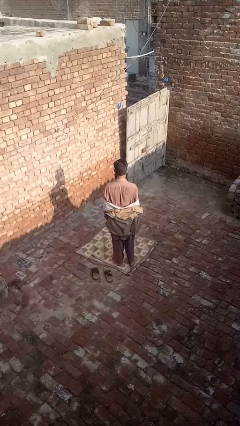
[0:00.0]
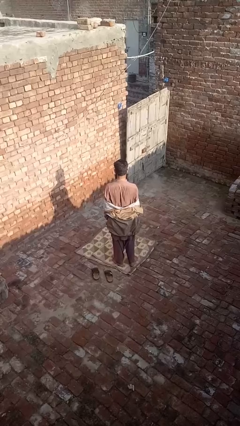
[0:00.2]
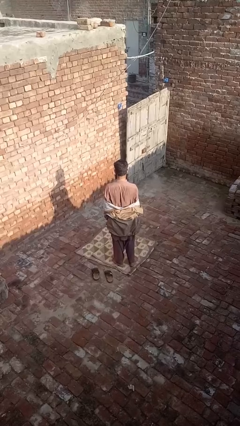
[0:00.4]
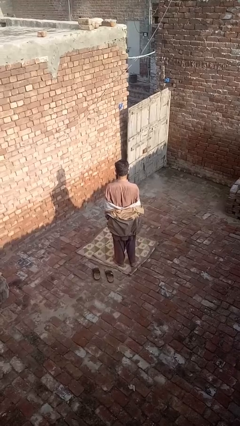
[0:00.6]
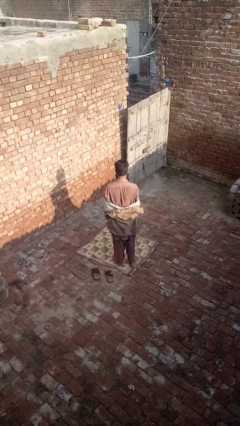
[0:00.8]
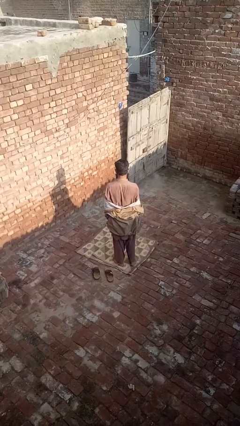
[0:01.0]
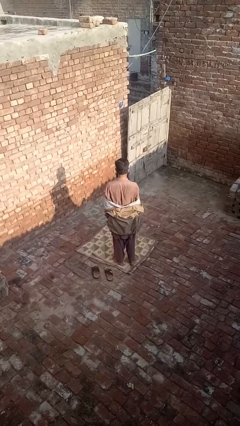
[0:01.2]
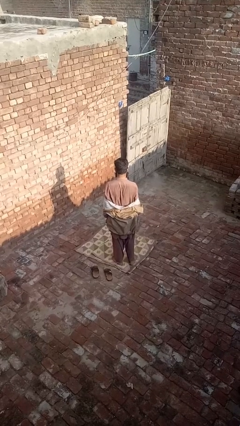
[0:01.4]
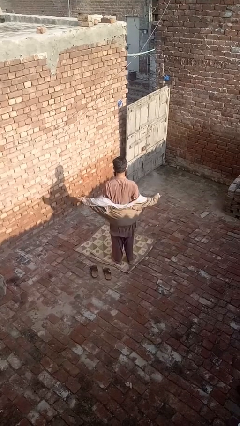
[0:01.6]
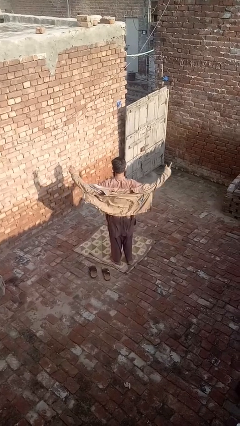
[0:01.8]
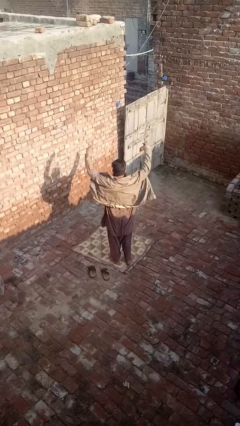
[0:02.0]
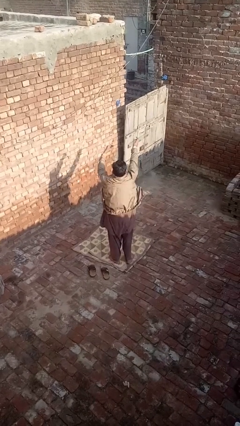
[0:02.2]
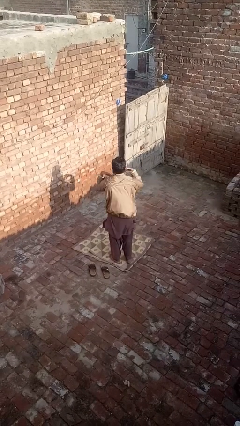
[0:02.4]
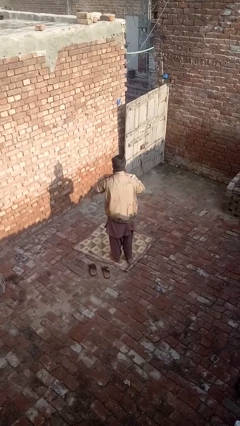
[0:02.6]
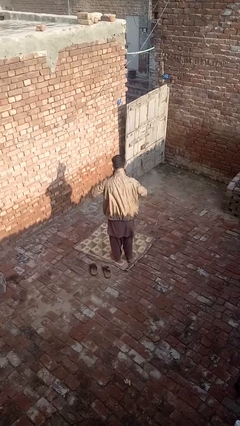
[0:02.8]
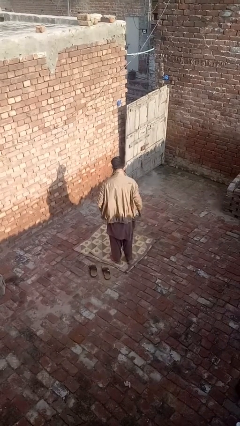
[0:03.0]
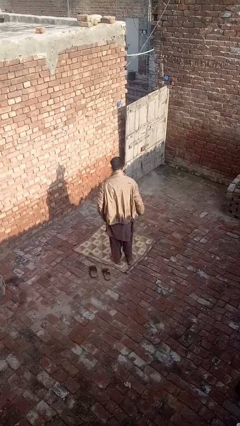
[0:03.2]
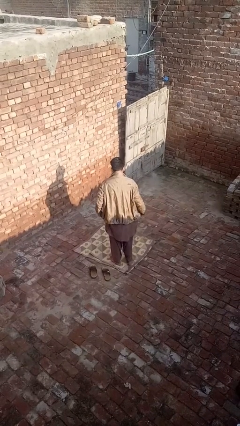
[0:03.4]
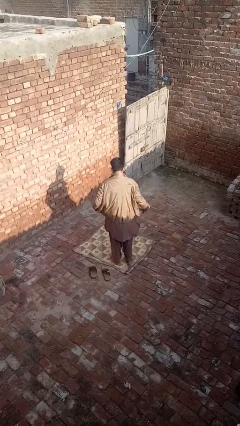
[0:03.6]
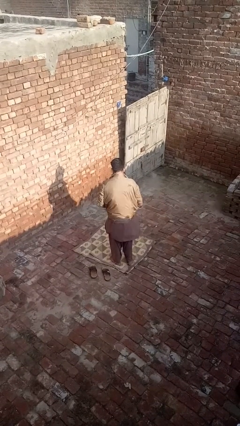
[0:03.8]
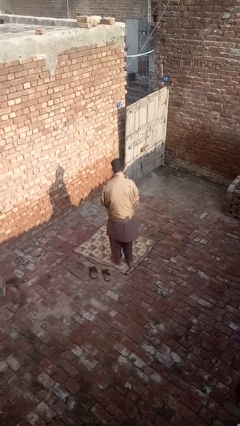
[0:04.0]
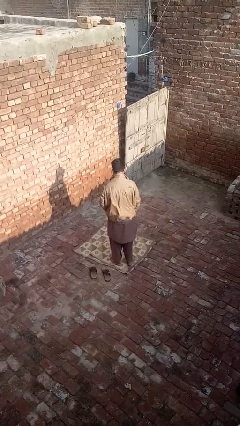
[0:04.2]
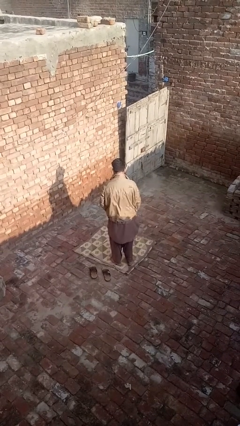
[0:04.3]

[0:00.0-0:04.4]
person puts on jacket

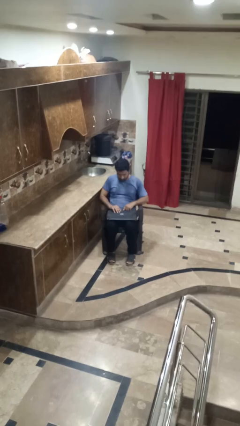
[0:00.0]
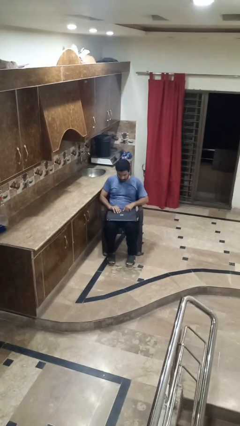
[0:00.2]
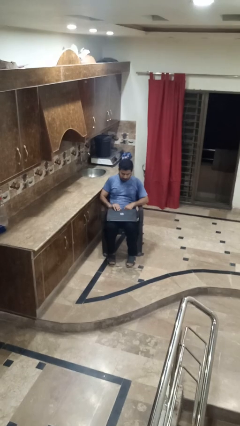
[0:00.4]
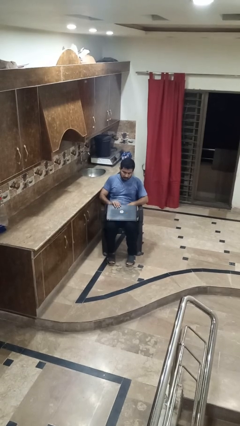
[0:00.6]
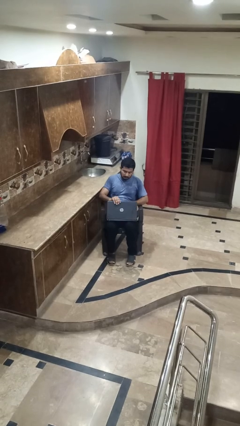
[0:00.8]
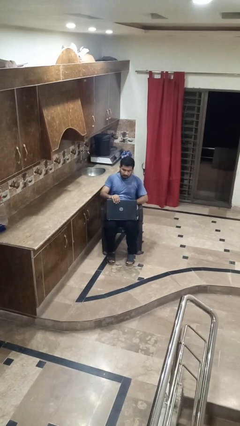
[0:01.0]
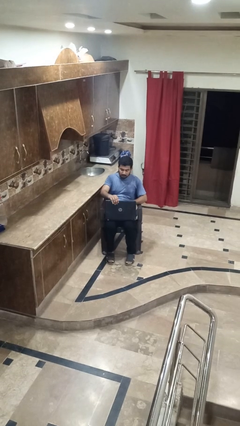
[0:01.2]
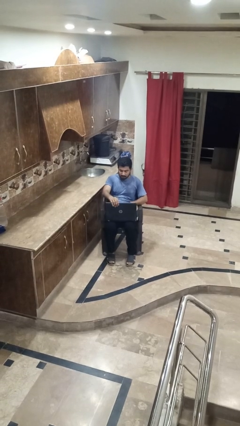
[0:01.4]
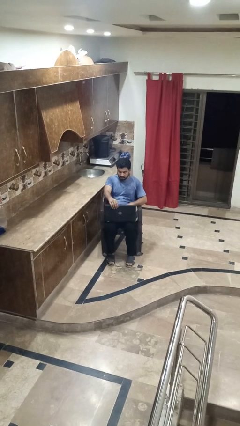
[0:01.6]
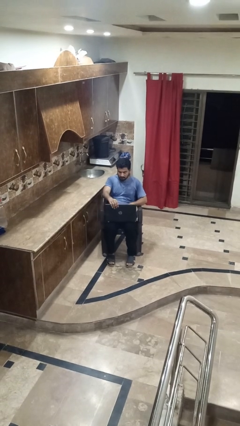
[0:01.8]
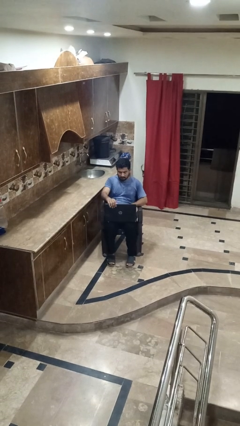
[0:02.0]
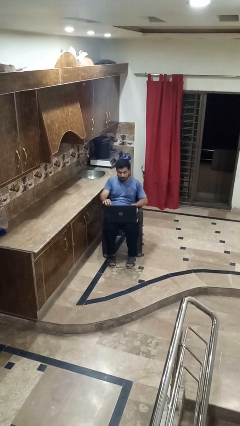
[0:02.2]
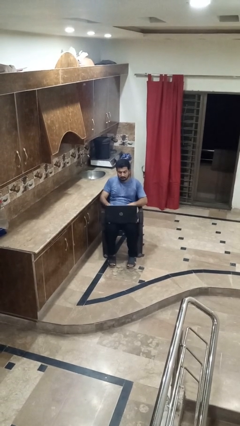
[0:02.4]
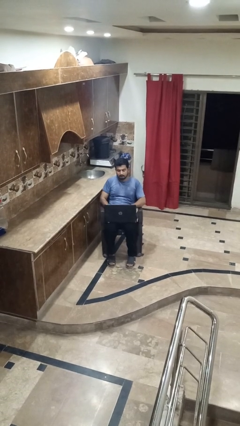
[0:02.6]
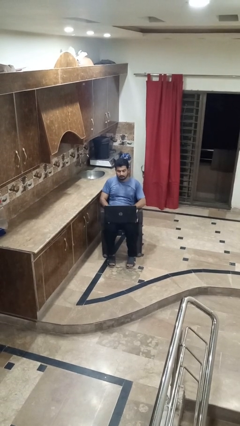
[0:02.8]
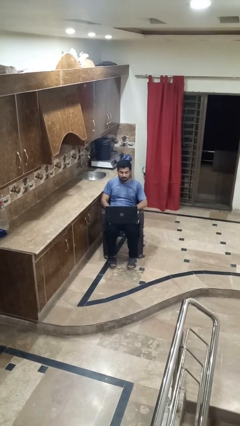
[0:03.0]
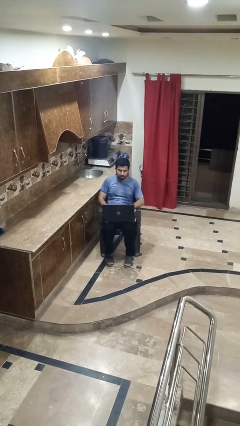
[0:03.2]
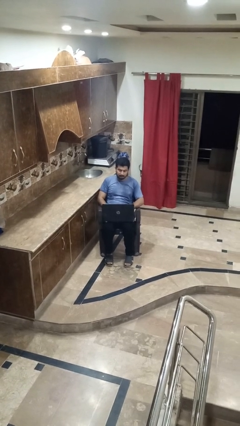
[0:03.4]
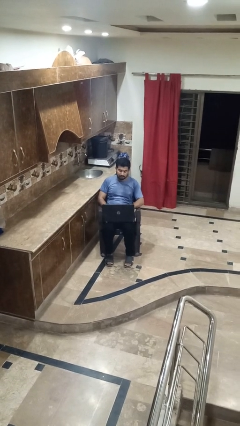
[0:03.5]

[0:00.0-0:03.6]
person opens laptop

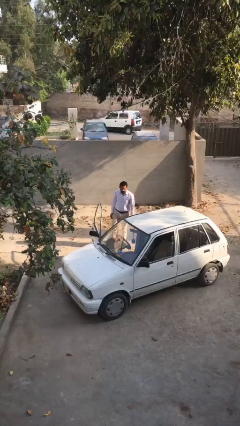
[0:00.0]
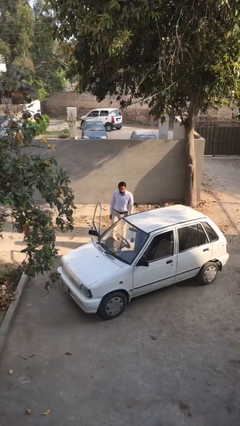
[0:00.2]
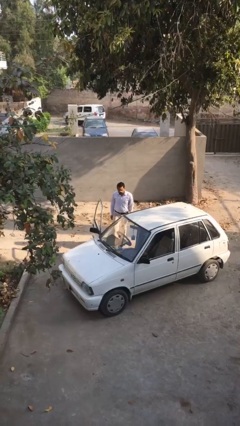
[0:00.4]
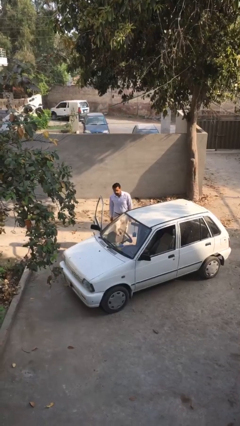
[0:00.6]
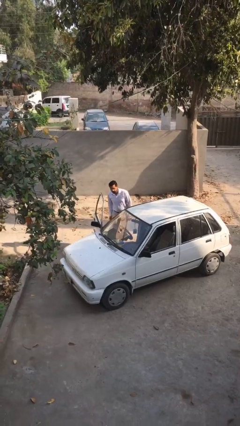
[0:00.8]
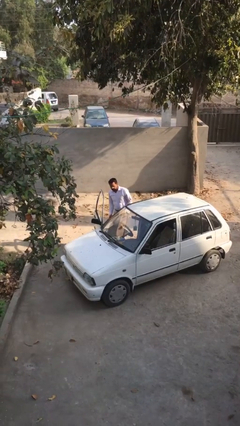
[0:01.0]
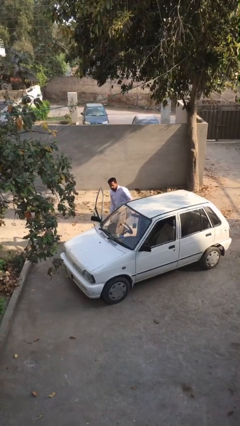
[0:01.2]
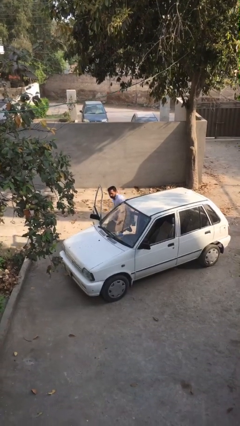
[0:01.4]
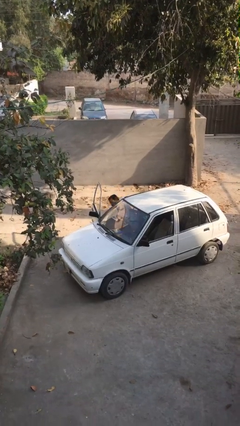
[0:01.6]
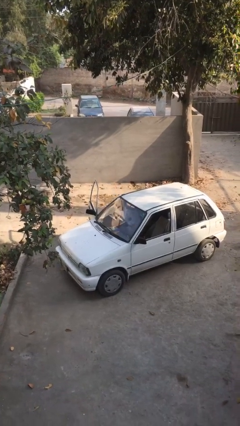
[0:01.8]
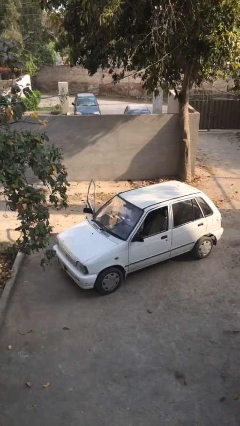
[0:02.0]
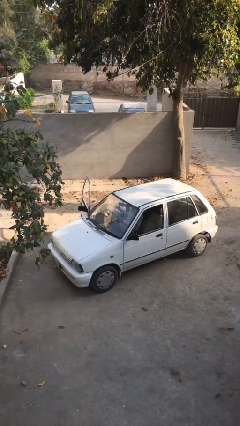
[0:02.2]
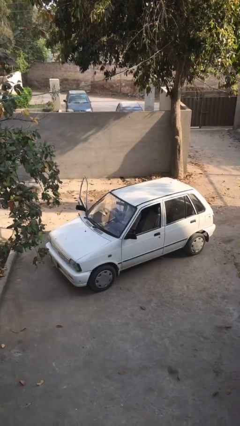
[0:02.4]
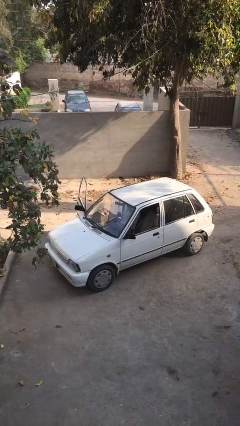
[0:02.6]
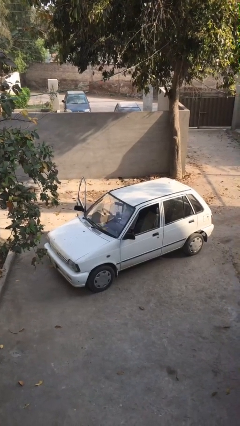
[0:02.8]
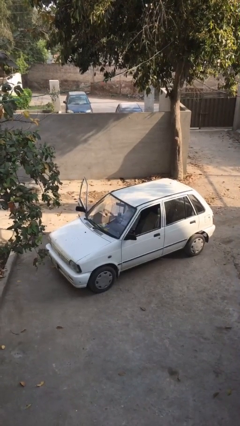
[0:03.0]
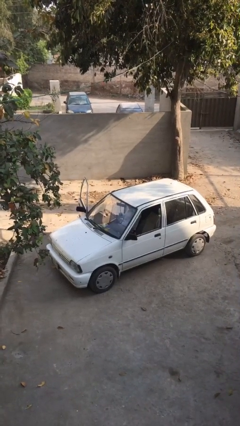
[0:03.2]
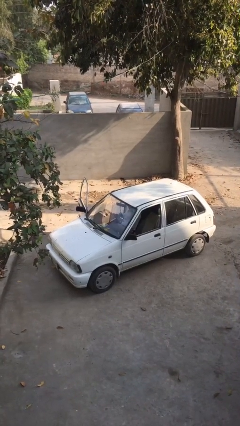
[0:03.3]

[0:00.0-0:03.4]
person enters car

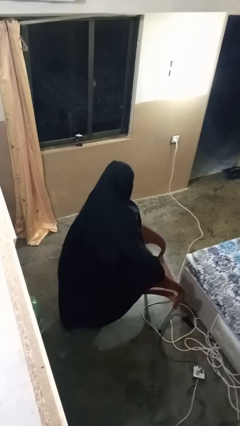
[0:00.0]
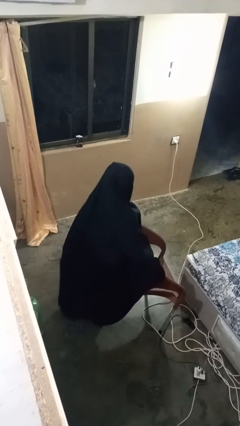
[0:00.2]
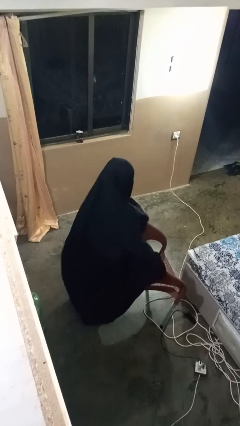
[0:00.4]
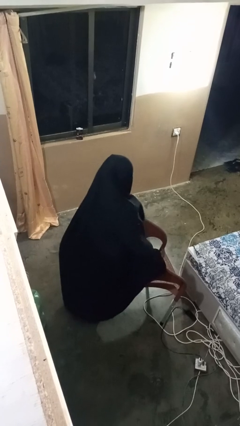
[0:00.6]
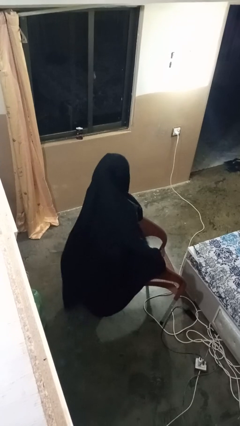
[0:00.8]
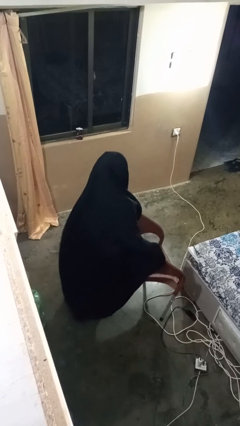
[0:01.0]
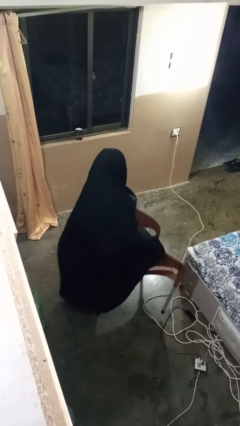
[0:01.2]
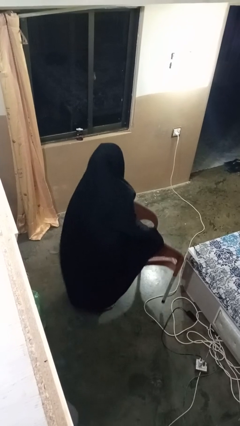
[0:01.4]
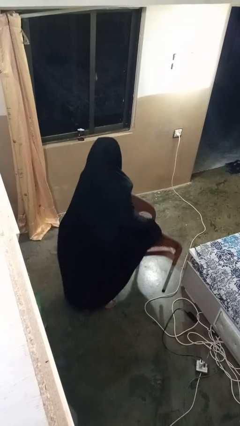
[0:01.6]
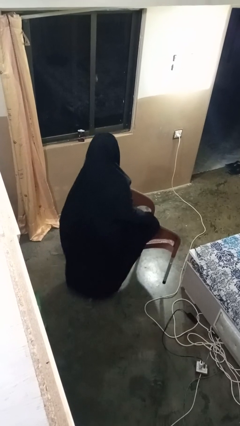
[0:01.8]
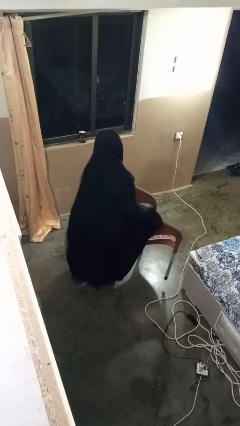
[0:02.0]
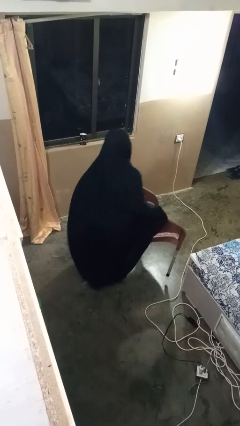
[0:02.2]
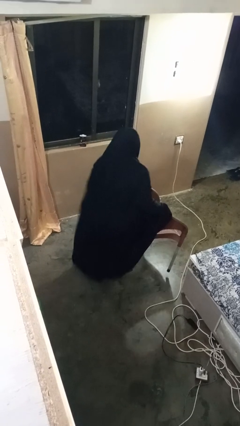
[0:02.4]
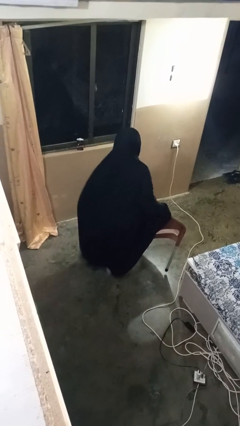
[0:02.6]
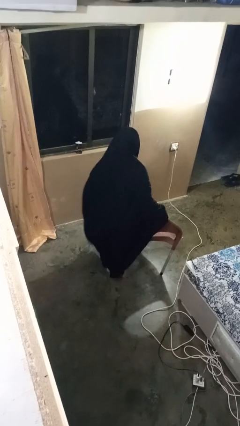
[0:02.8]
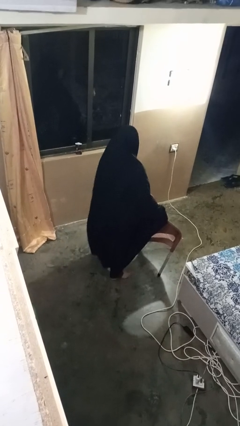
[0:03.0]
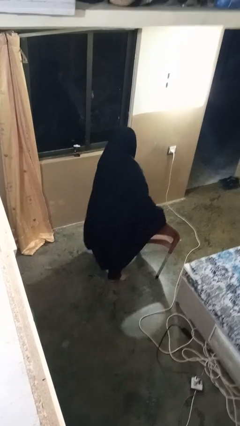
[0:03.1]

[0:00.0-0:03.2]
person carries furniture

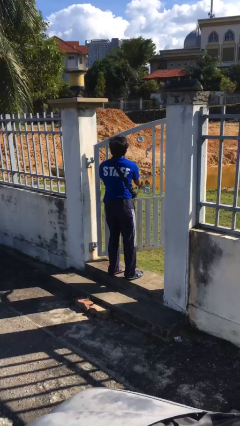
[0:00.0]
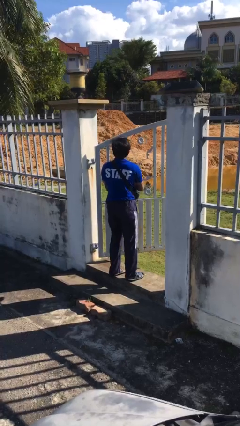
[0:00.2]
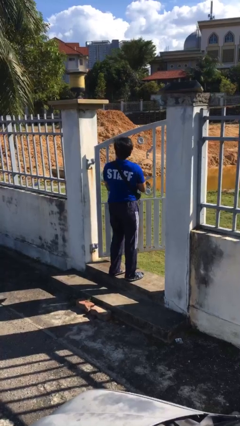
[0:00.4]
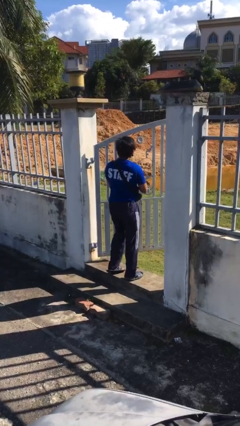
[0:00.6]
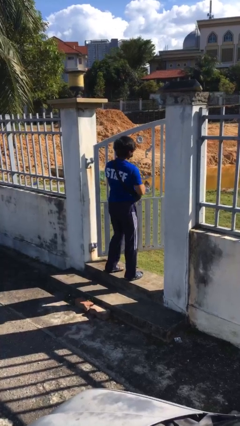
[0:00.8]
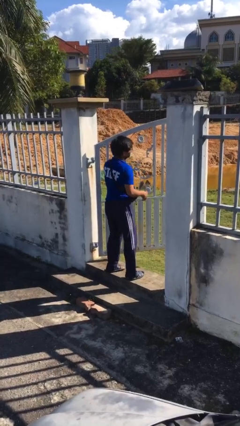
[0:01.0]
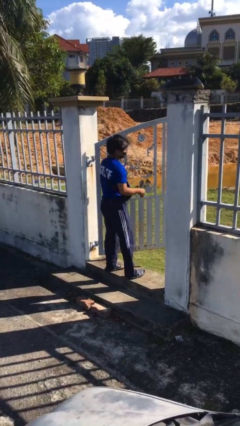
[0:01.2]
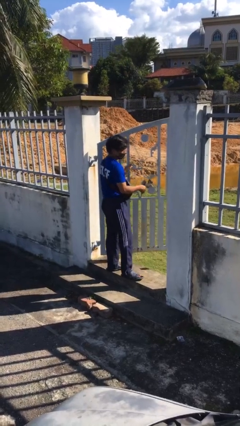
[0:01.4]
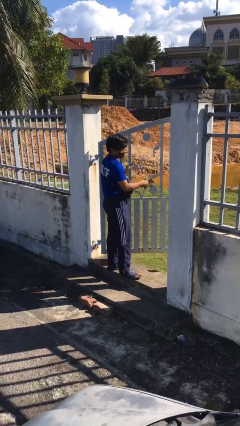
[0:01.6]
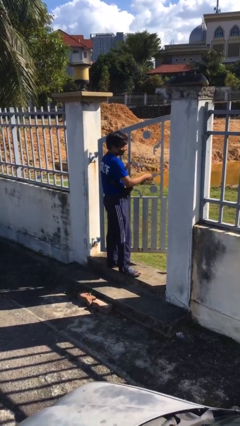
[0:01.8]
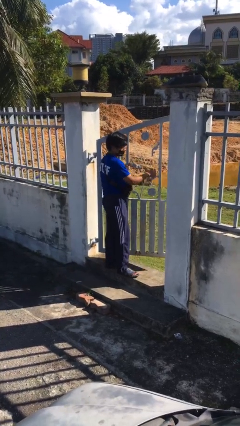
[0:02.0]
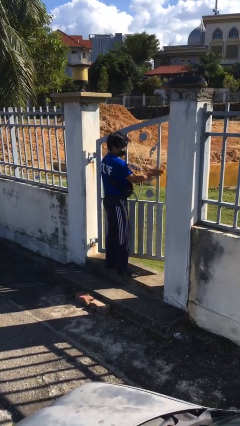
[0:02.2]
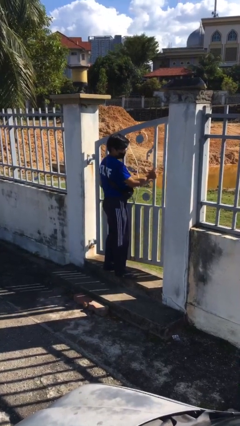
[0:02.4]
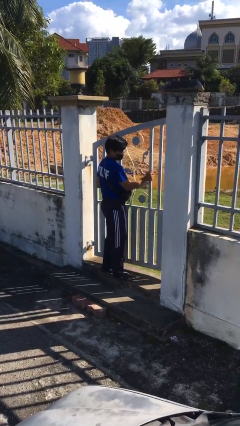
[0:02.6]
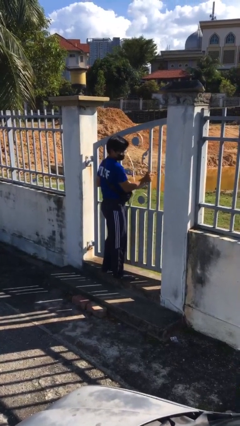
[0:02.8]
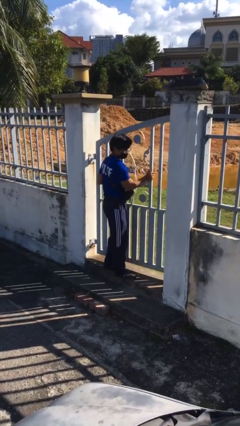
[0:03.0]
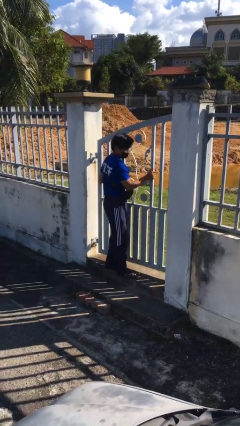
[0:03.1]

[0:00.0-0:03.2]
person closes facility door
